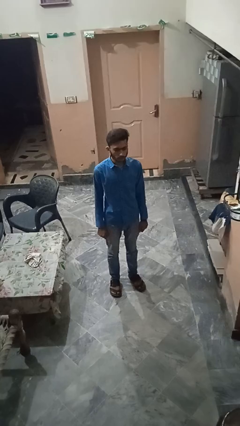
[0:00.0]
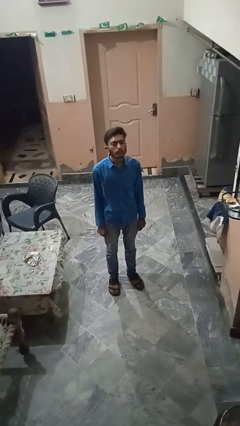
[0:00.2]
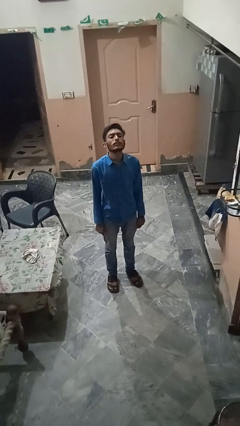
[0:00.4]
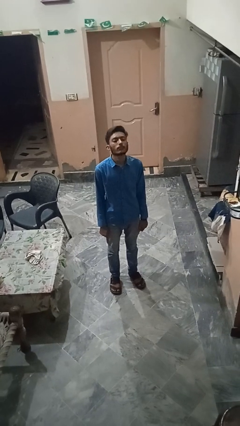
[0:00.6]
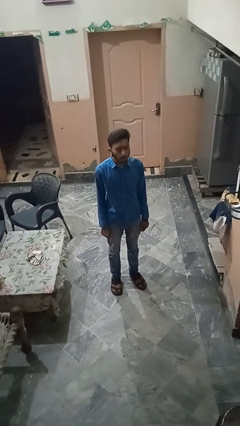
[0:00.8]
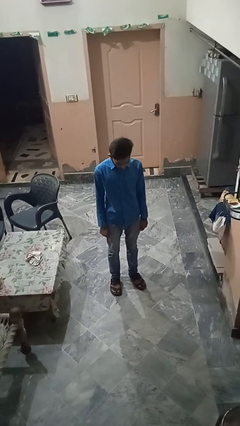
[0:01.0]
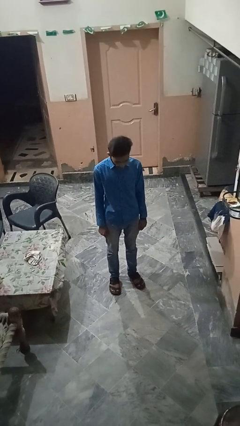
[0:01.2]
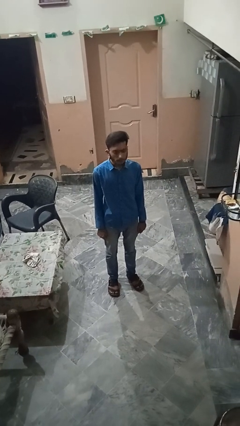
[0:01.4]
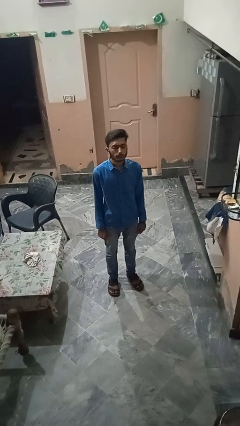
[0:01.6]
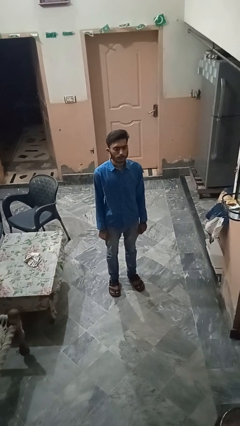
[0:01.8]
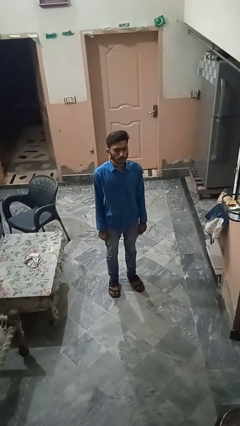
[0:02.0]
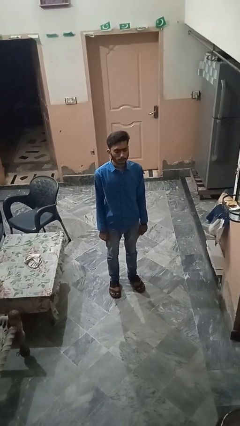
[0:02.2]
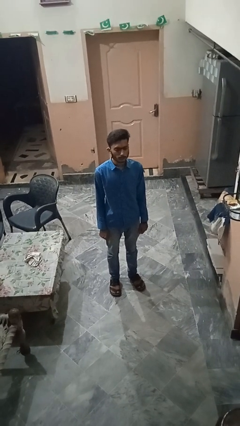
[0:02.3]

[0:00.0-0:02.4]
person nods head

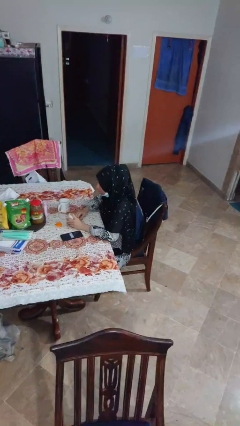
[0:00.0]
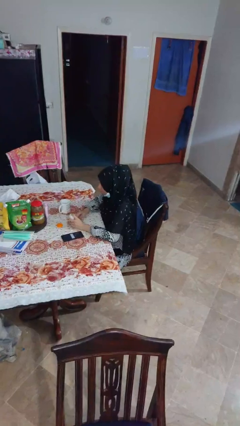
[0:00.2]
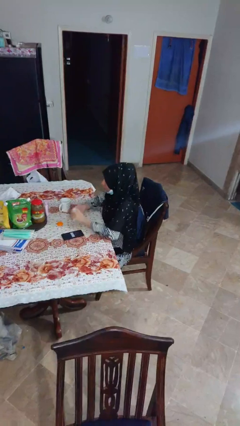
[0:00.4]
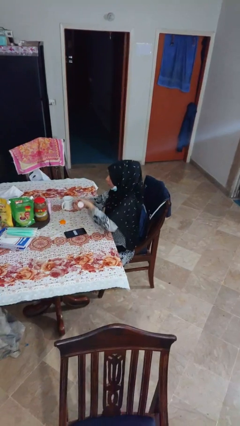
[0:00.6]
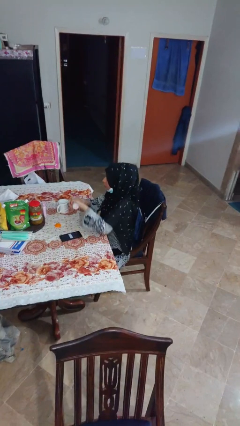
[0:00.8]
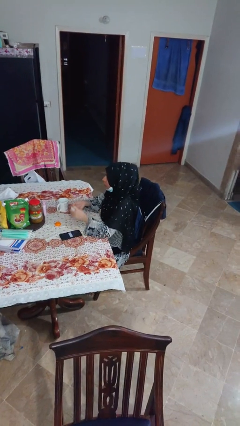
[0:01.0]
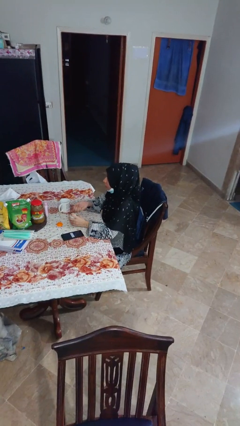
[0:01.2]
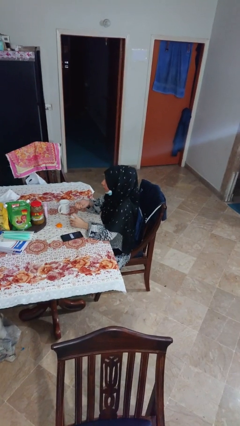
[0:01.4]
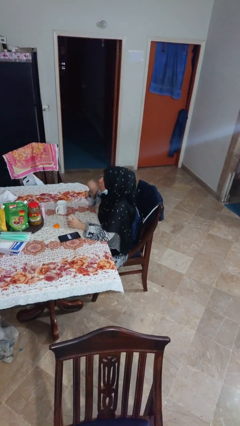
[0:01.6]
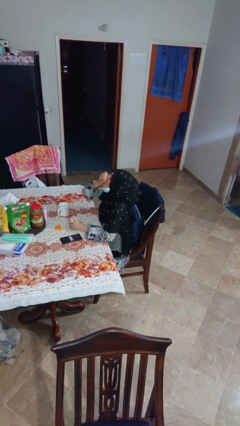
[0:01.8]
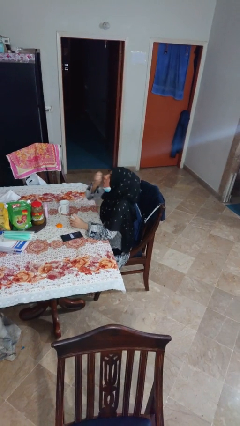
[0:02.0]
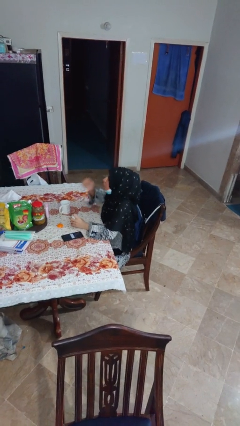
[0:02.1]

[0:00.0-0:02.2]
person takes medicine pills

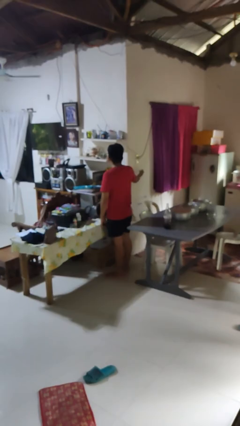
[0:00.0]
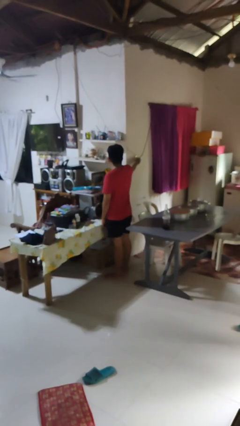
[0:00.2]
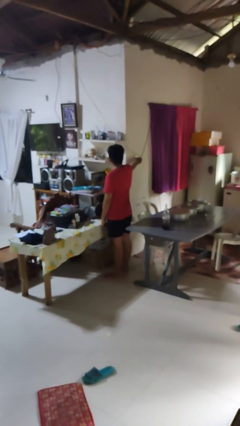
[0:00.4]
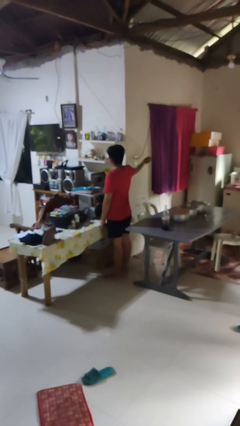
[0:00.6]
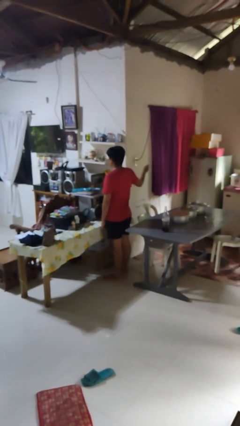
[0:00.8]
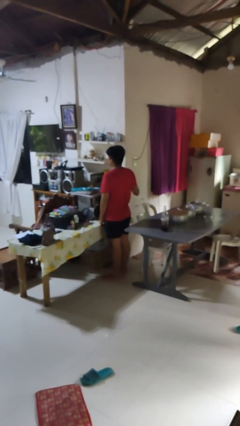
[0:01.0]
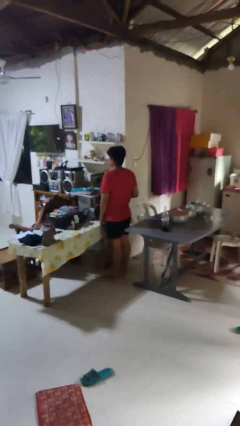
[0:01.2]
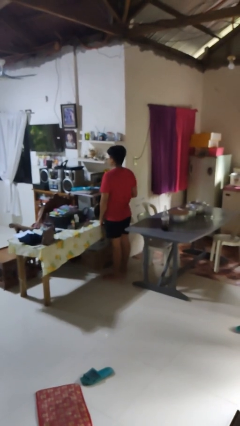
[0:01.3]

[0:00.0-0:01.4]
person turns off fan

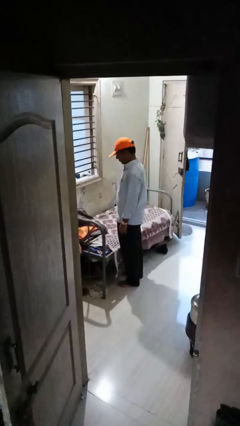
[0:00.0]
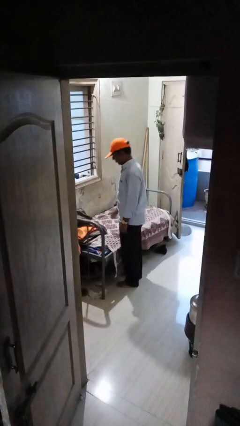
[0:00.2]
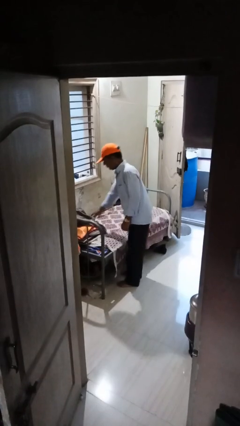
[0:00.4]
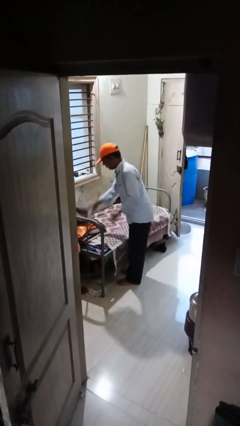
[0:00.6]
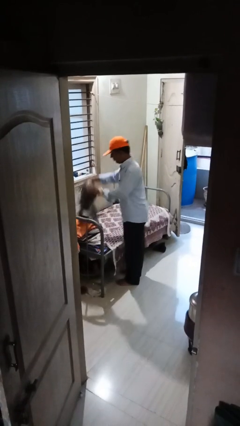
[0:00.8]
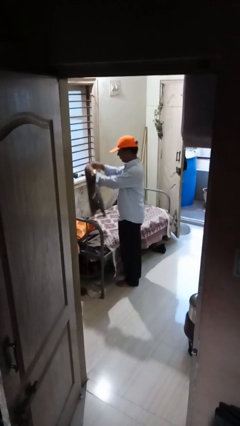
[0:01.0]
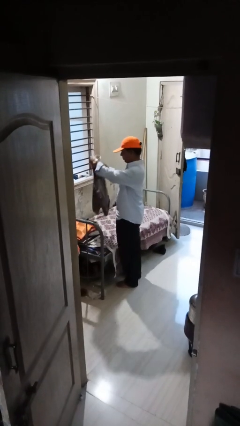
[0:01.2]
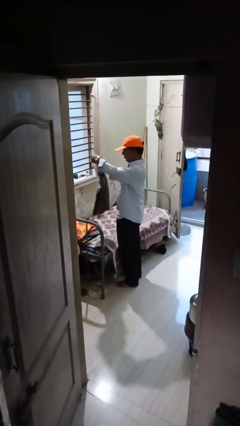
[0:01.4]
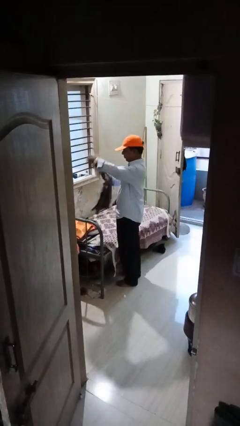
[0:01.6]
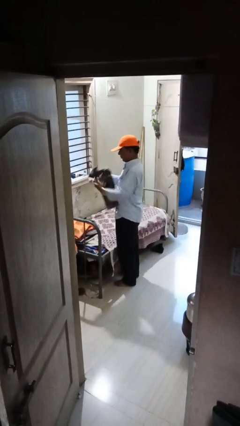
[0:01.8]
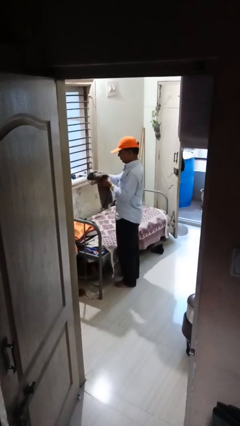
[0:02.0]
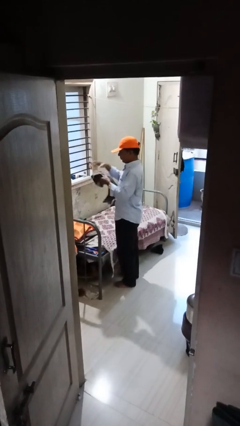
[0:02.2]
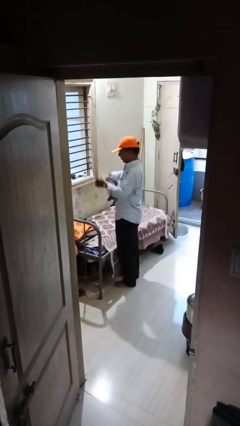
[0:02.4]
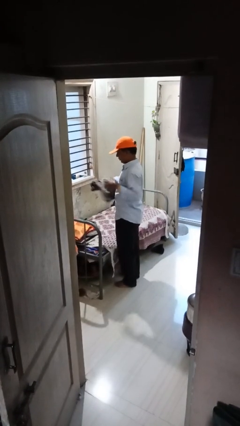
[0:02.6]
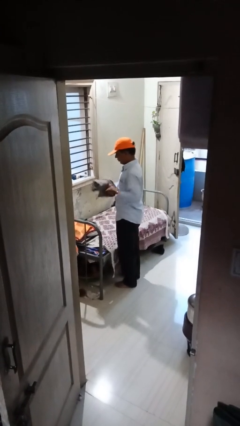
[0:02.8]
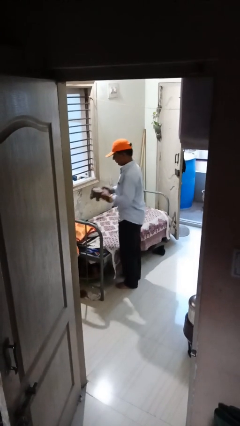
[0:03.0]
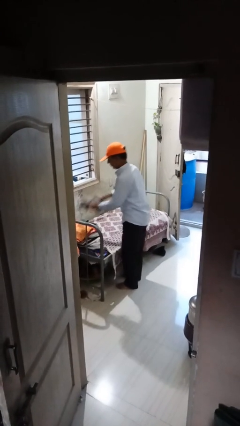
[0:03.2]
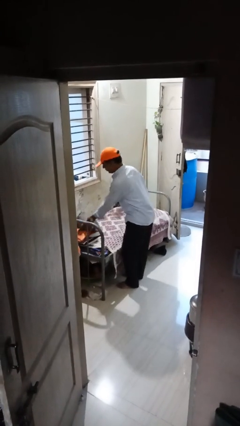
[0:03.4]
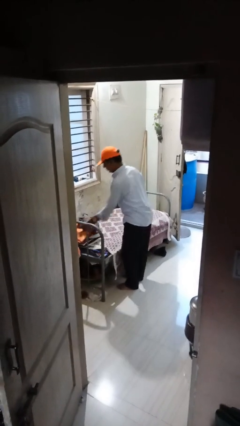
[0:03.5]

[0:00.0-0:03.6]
person folds pants

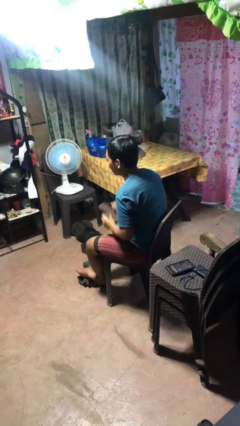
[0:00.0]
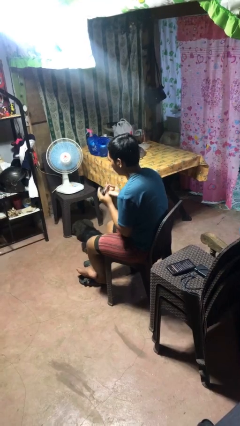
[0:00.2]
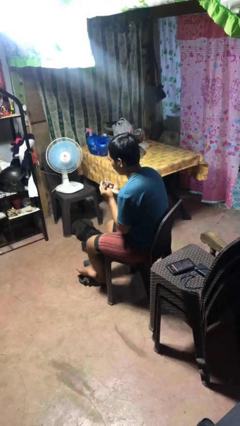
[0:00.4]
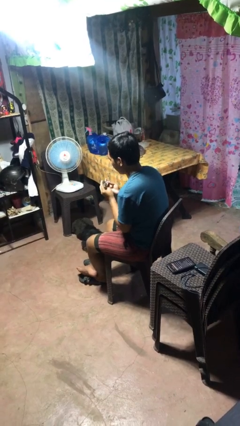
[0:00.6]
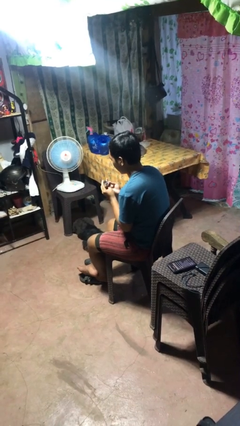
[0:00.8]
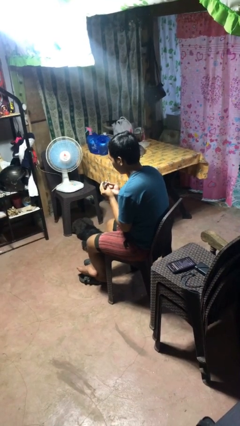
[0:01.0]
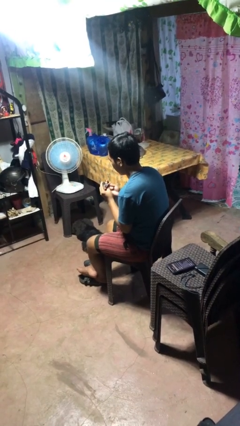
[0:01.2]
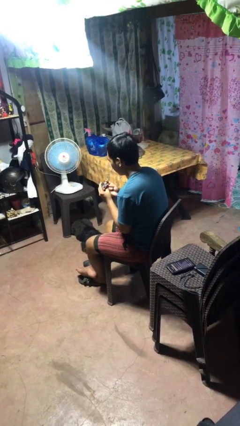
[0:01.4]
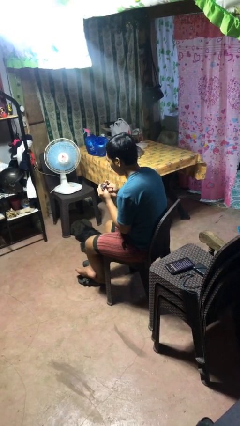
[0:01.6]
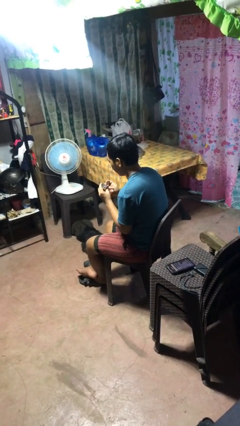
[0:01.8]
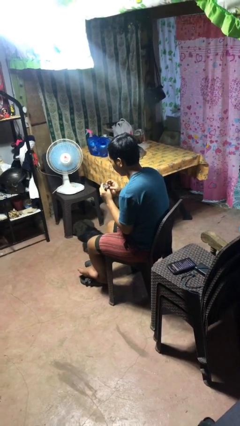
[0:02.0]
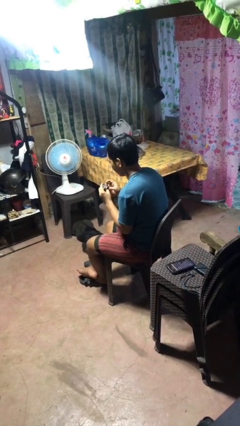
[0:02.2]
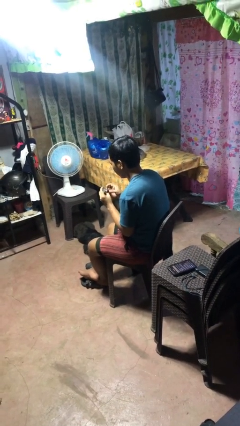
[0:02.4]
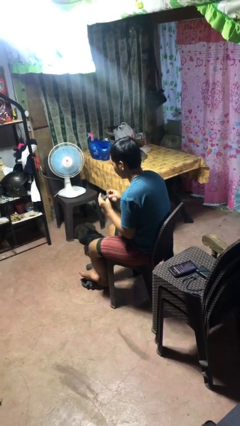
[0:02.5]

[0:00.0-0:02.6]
person clips fingernails

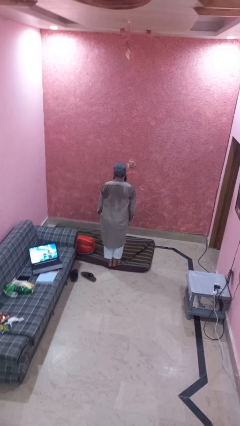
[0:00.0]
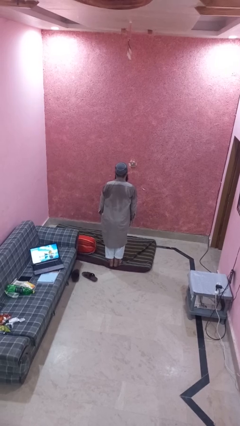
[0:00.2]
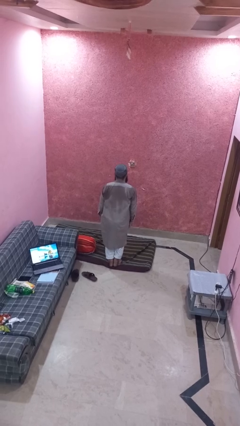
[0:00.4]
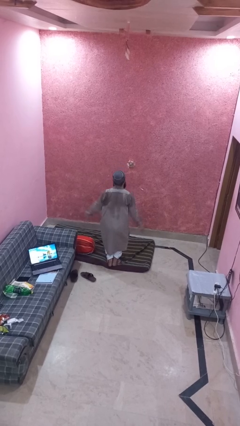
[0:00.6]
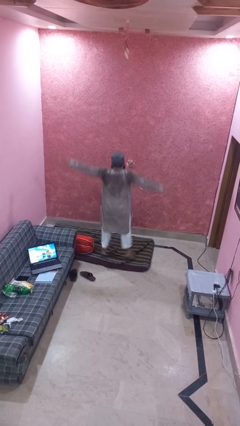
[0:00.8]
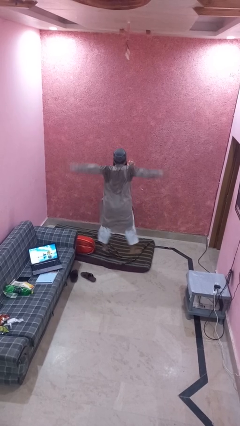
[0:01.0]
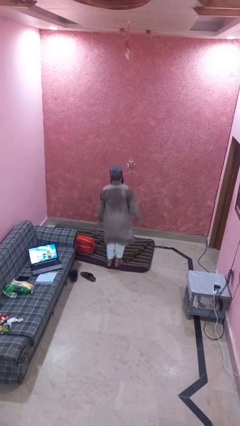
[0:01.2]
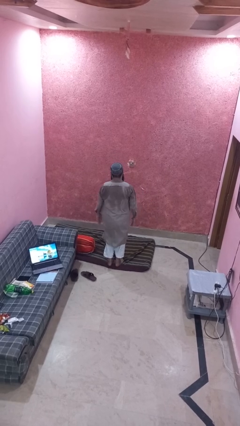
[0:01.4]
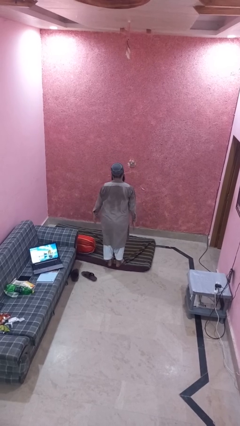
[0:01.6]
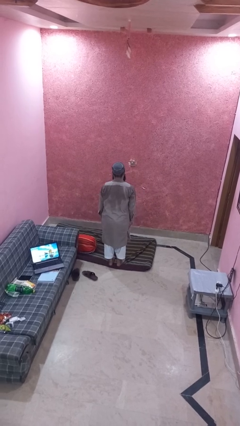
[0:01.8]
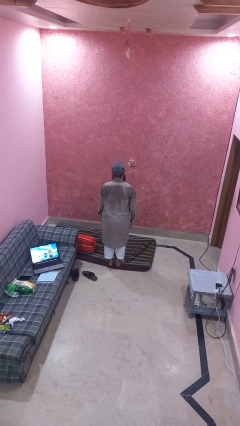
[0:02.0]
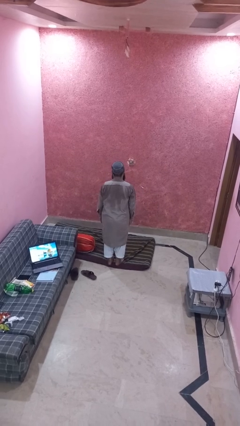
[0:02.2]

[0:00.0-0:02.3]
person exercises with jumping jacks

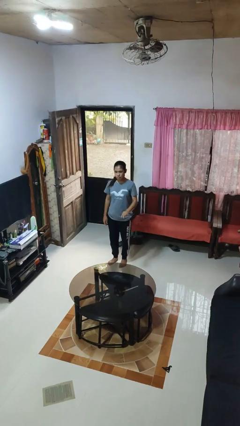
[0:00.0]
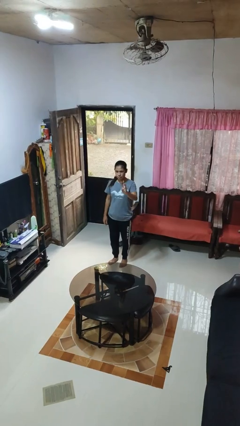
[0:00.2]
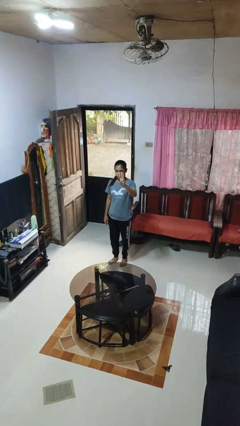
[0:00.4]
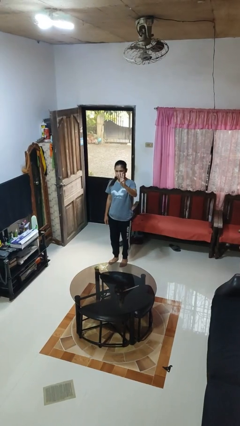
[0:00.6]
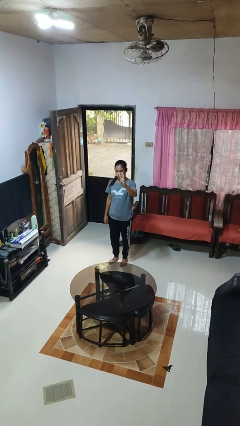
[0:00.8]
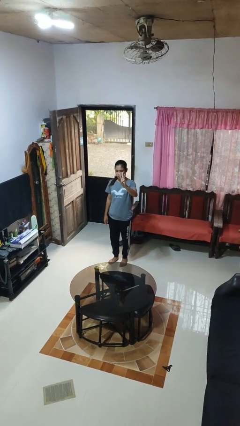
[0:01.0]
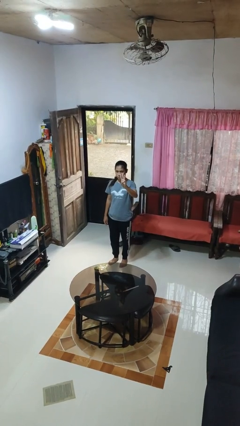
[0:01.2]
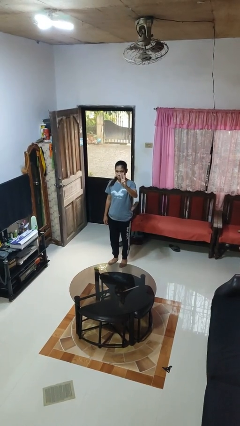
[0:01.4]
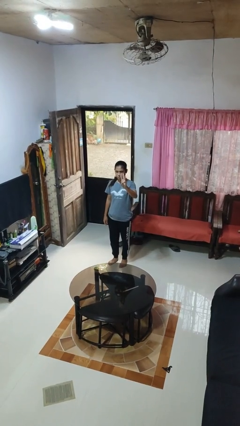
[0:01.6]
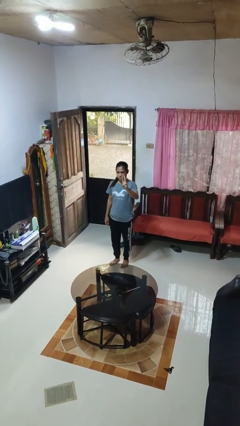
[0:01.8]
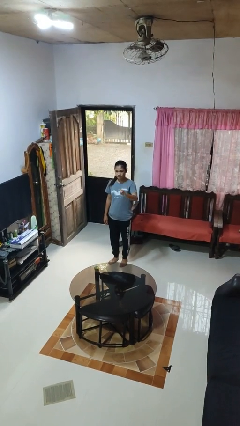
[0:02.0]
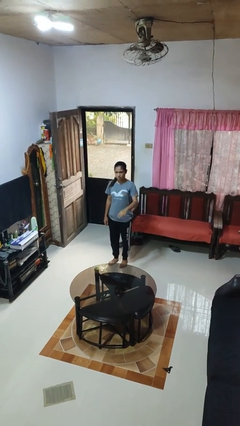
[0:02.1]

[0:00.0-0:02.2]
person gestures number three

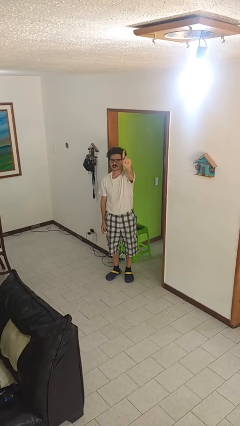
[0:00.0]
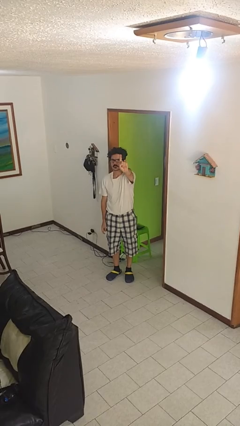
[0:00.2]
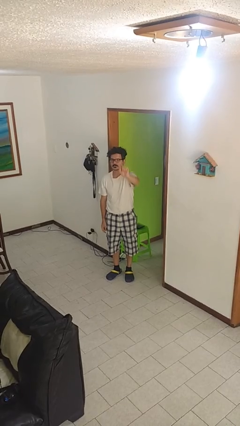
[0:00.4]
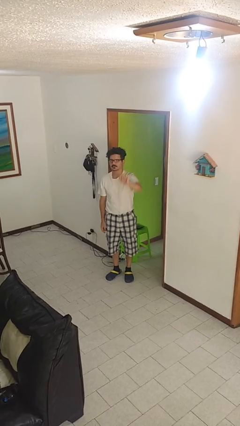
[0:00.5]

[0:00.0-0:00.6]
person gestures number one
